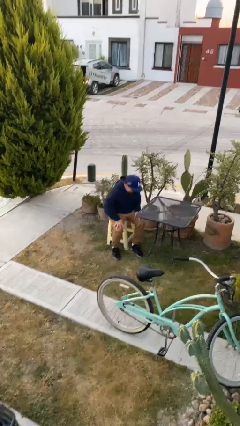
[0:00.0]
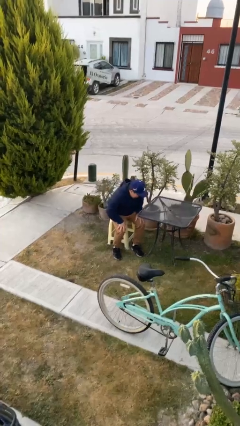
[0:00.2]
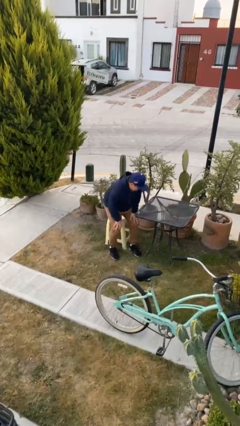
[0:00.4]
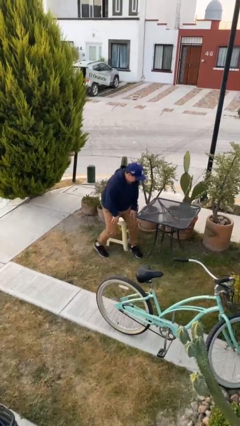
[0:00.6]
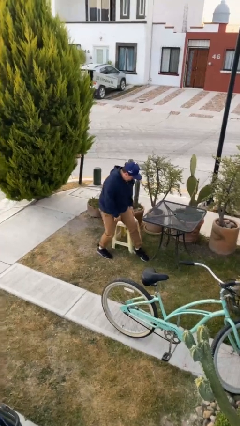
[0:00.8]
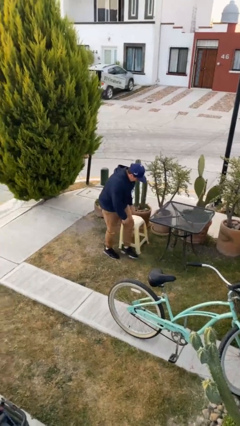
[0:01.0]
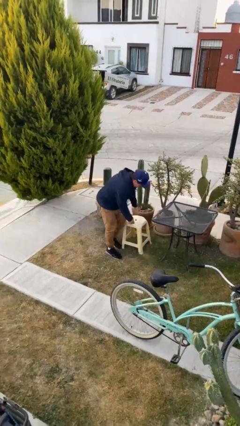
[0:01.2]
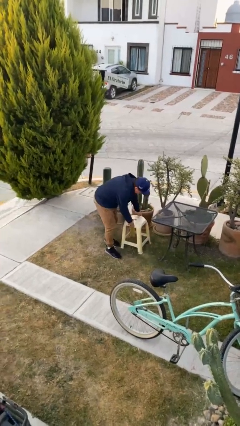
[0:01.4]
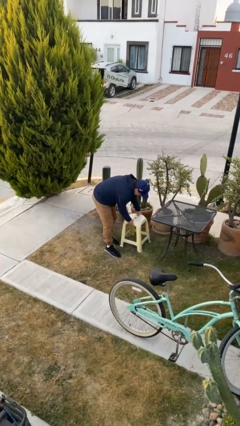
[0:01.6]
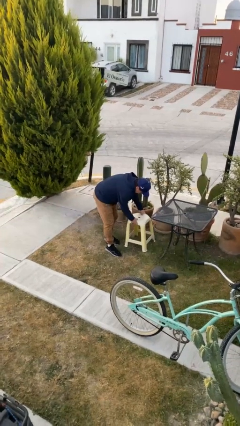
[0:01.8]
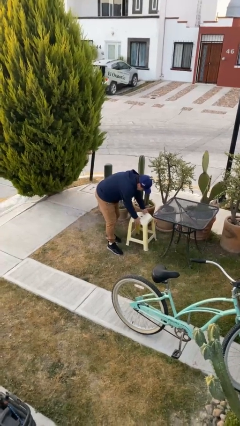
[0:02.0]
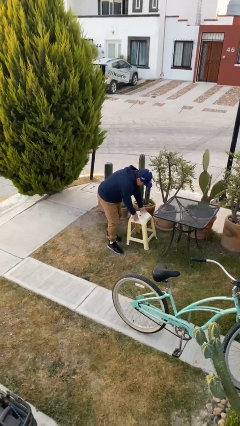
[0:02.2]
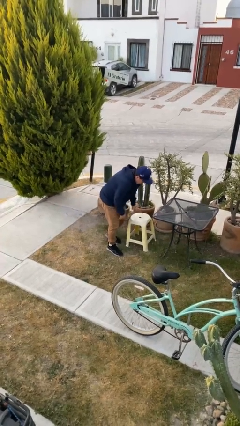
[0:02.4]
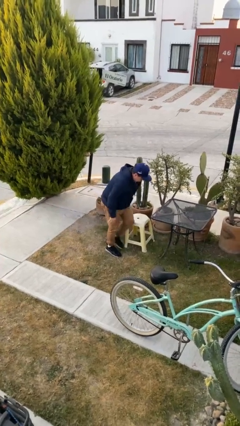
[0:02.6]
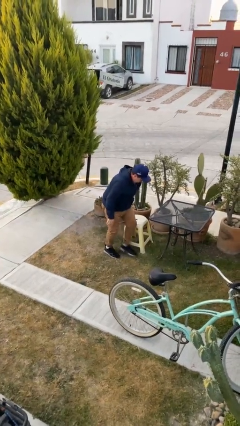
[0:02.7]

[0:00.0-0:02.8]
person stands up

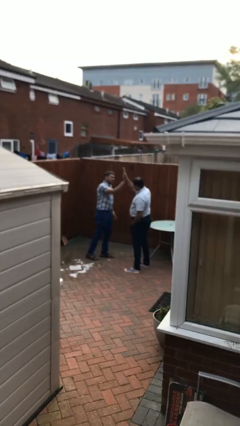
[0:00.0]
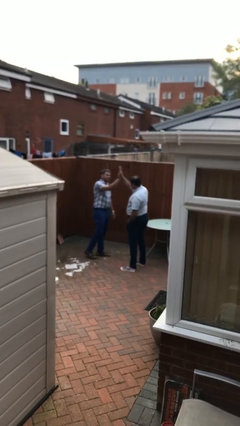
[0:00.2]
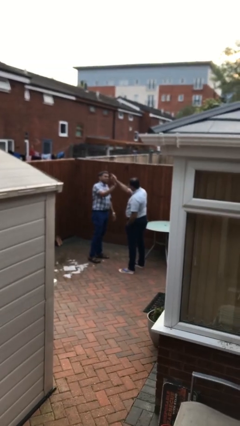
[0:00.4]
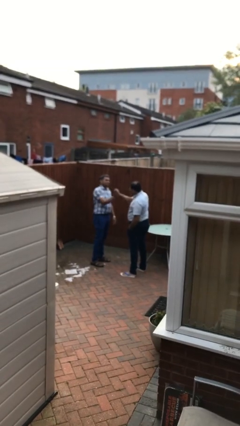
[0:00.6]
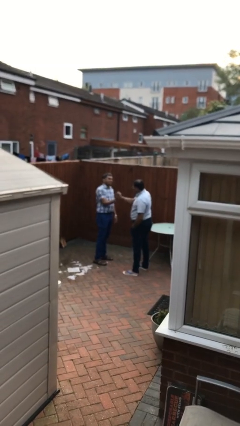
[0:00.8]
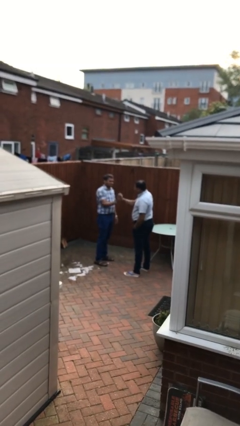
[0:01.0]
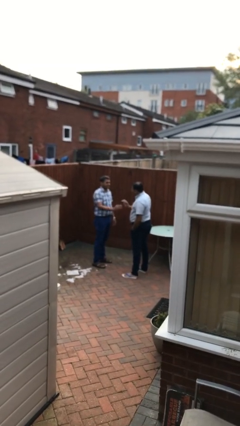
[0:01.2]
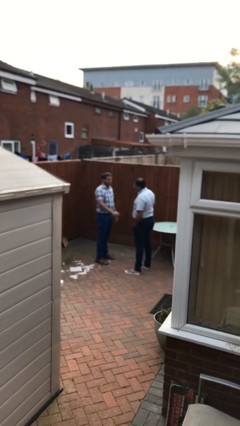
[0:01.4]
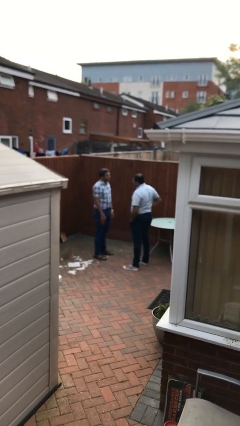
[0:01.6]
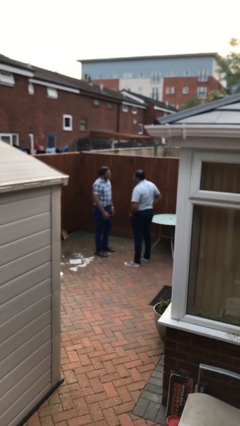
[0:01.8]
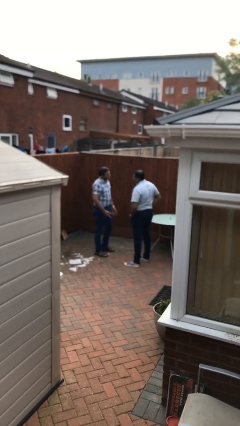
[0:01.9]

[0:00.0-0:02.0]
person highfives hand

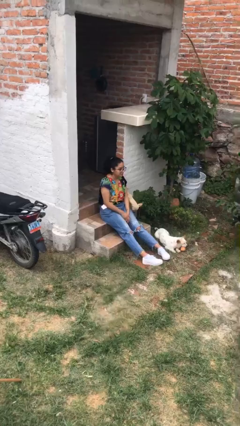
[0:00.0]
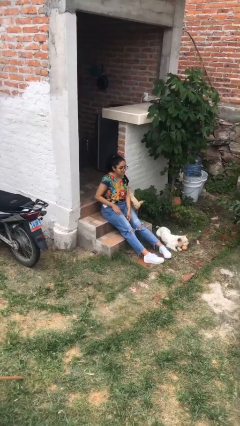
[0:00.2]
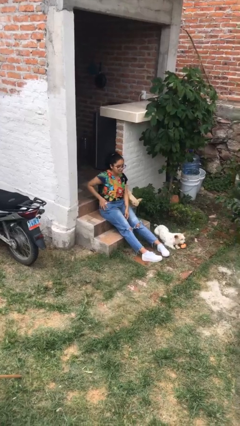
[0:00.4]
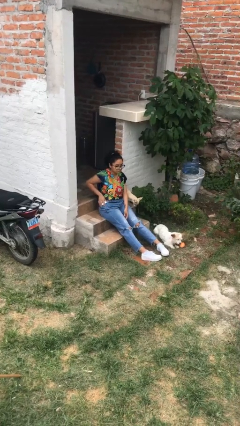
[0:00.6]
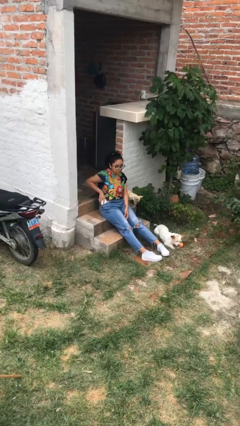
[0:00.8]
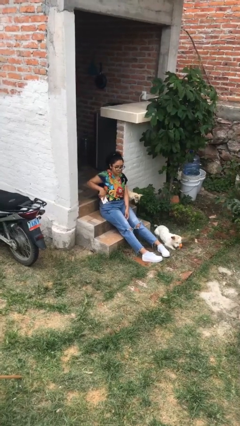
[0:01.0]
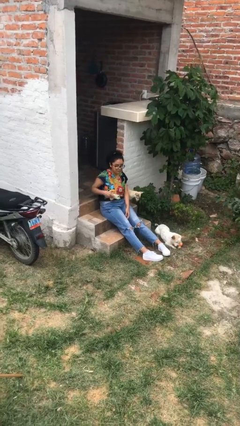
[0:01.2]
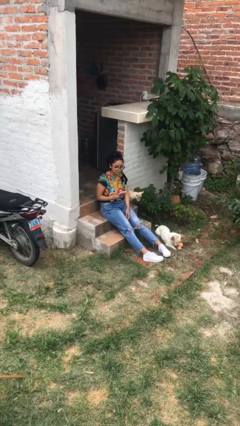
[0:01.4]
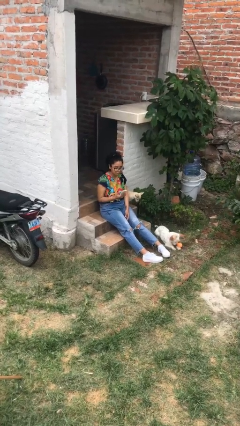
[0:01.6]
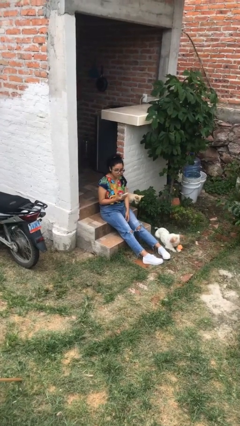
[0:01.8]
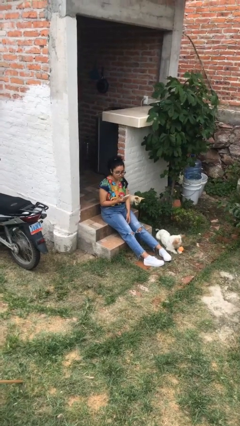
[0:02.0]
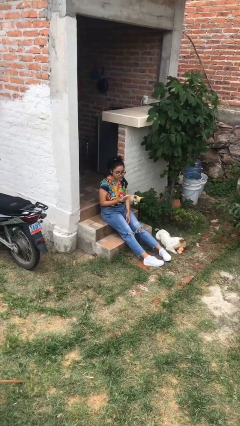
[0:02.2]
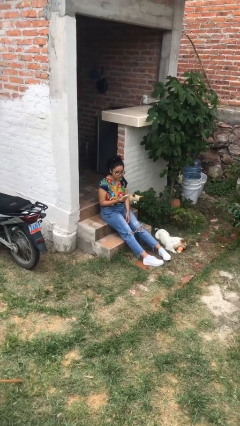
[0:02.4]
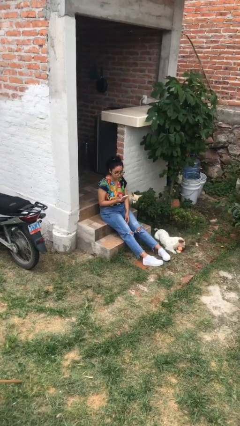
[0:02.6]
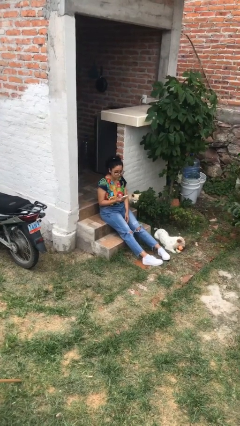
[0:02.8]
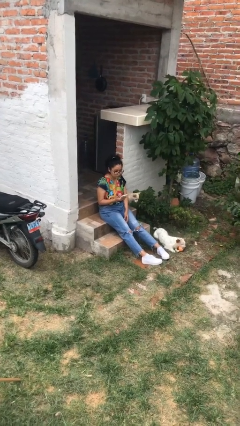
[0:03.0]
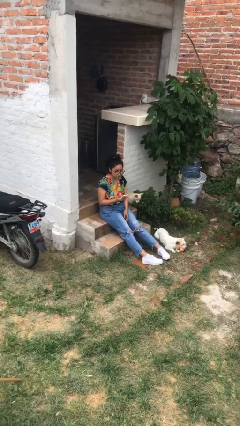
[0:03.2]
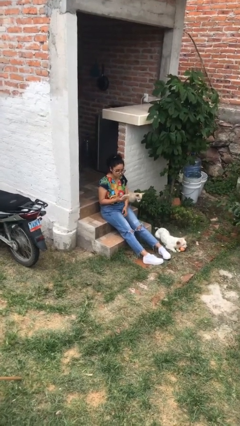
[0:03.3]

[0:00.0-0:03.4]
person takes phone from pocket

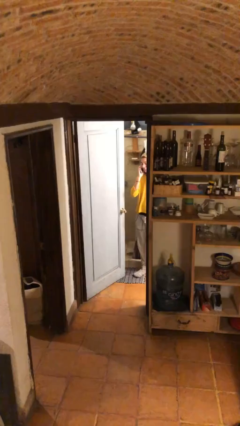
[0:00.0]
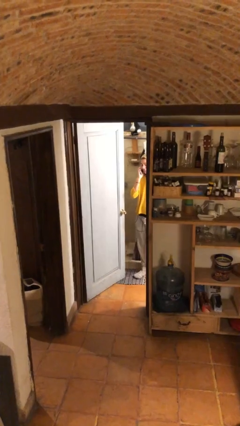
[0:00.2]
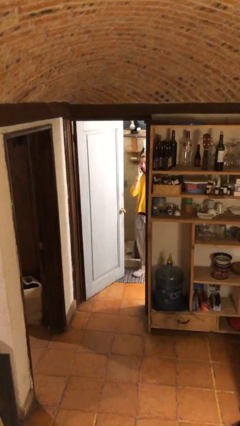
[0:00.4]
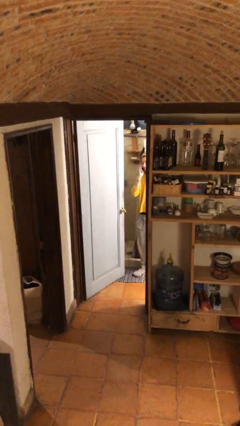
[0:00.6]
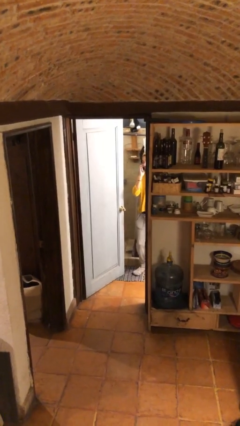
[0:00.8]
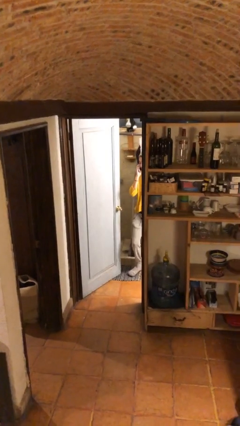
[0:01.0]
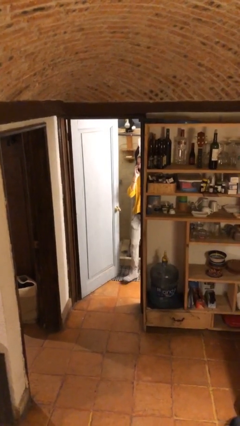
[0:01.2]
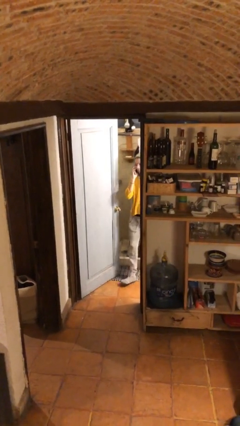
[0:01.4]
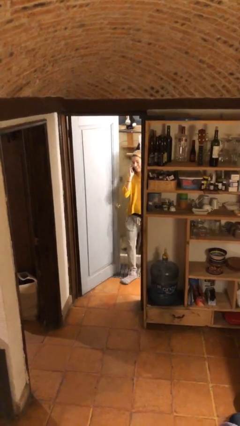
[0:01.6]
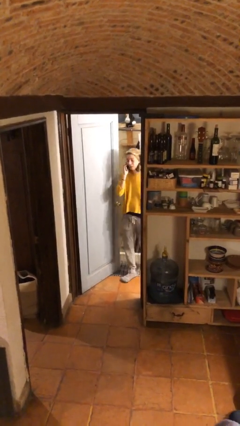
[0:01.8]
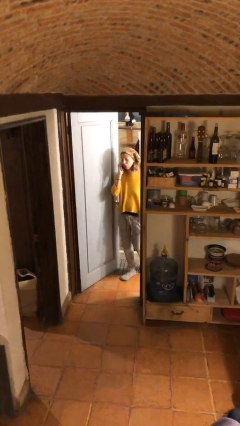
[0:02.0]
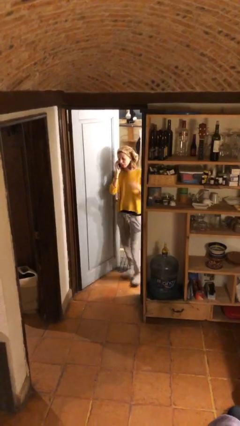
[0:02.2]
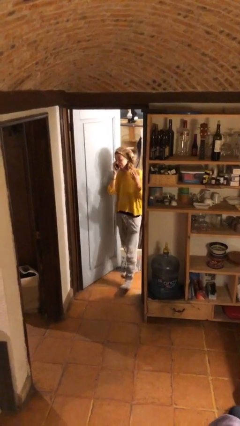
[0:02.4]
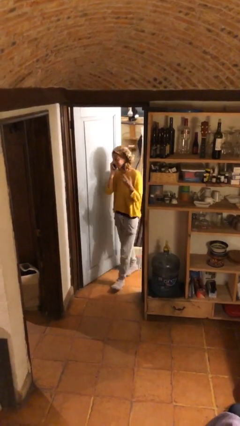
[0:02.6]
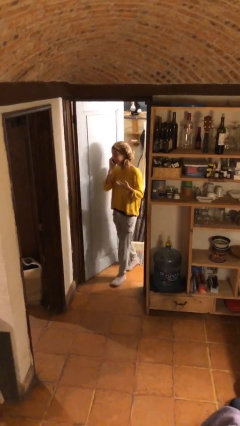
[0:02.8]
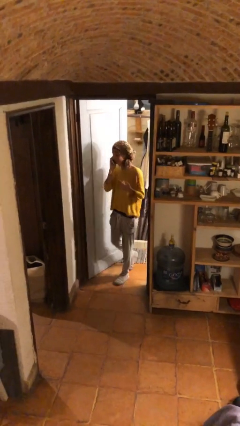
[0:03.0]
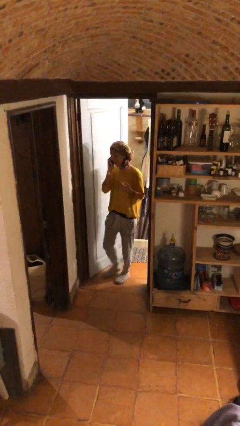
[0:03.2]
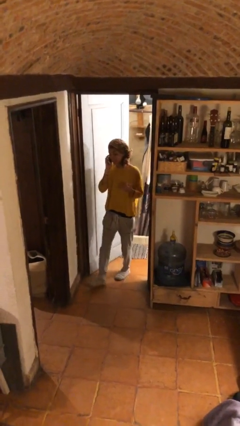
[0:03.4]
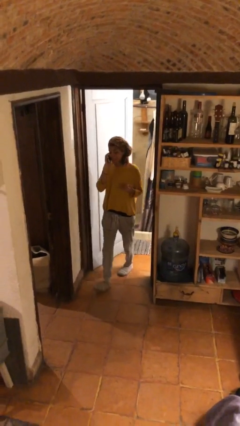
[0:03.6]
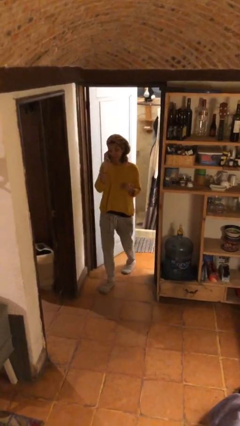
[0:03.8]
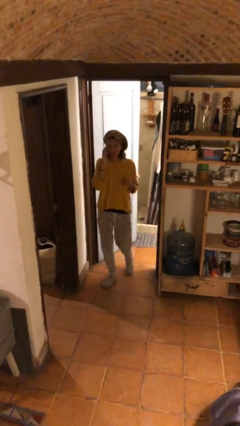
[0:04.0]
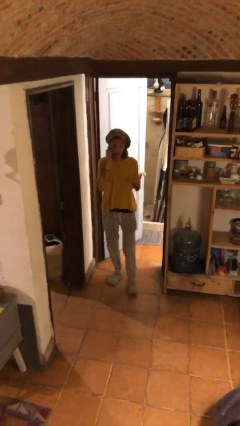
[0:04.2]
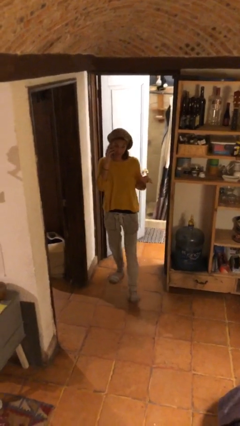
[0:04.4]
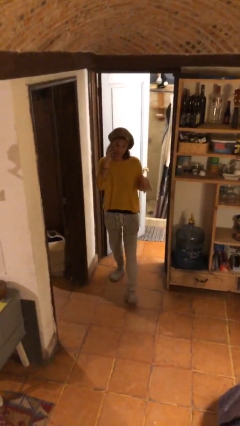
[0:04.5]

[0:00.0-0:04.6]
person enters scene through structure

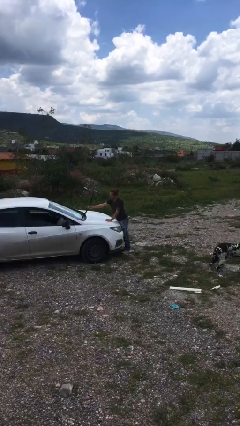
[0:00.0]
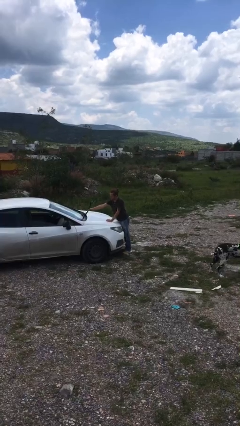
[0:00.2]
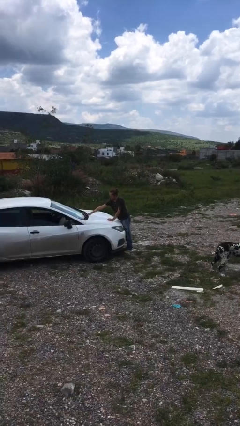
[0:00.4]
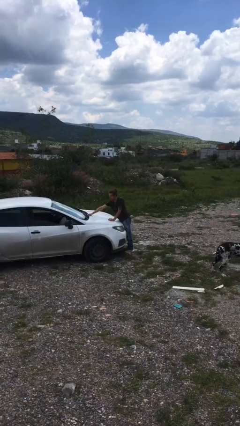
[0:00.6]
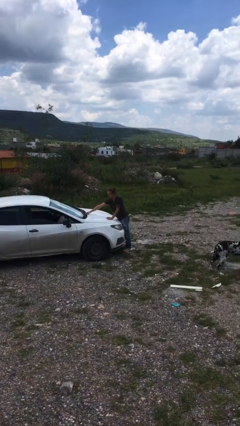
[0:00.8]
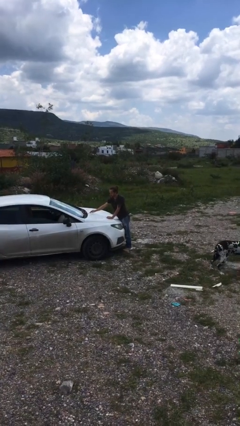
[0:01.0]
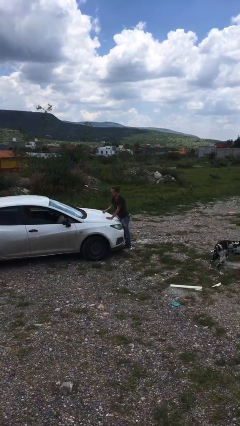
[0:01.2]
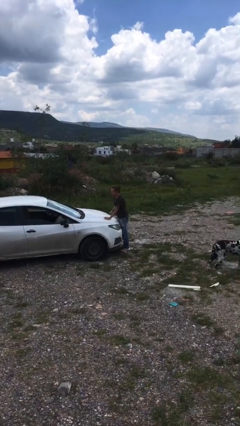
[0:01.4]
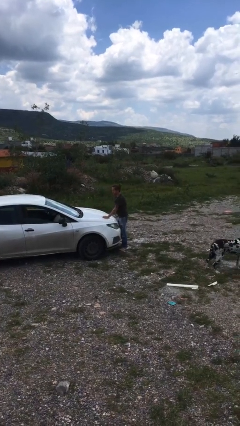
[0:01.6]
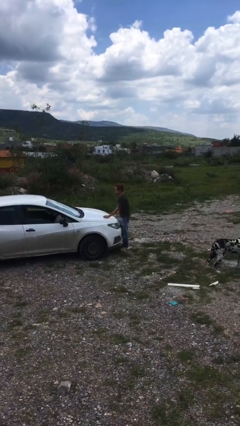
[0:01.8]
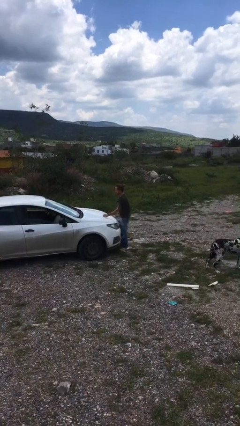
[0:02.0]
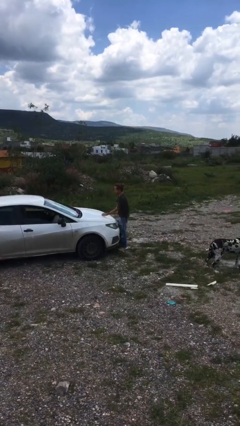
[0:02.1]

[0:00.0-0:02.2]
person flips down car wipers

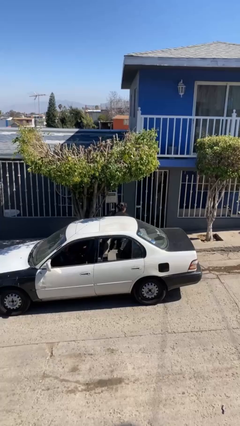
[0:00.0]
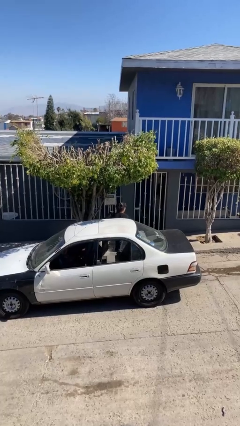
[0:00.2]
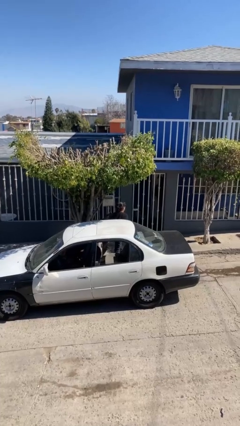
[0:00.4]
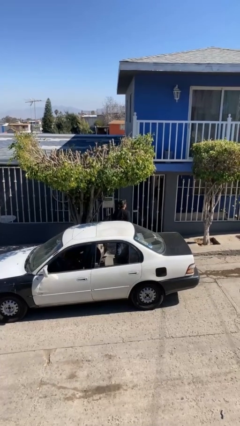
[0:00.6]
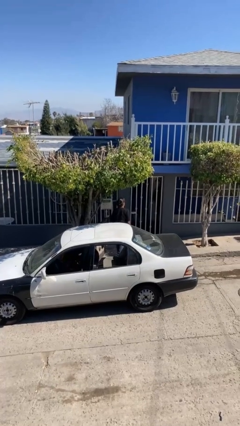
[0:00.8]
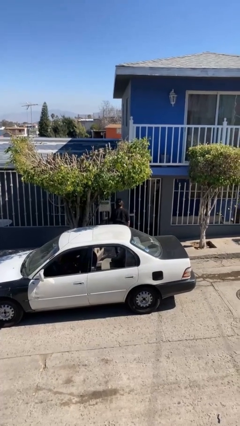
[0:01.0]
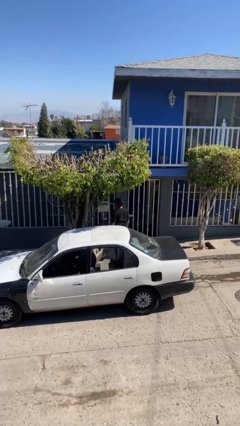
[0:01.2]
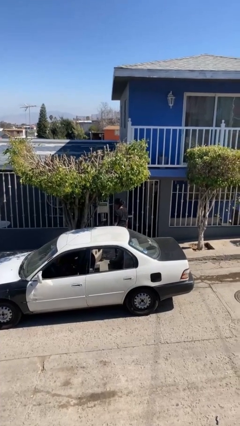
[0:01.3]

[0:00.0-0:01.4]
person exits car

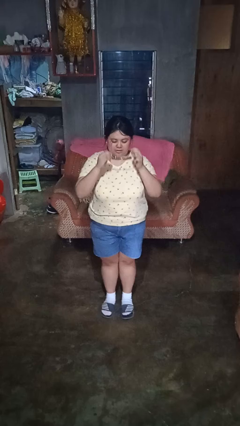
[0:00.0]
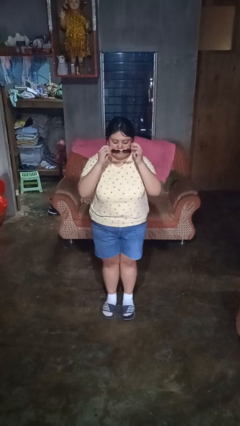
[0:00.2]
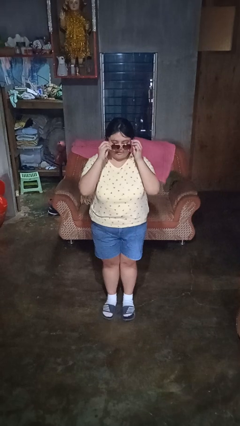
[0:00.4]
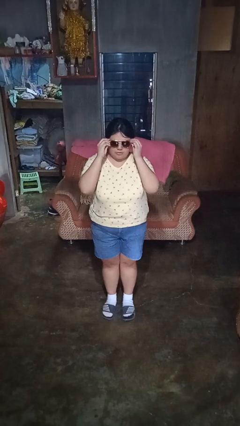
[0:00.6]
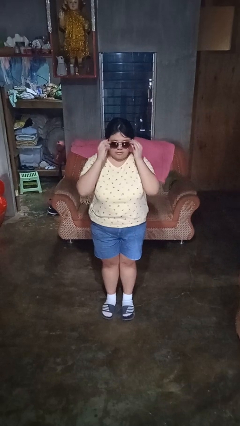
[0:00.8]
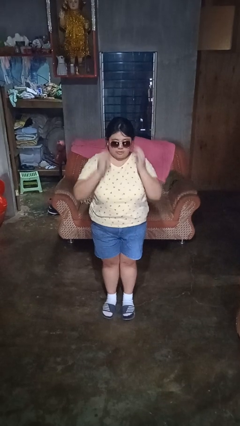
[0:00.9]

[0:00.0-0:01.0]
person puts on sunglasses
